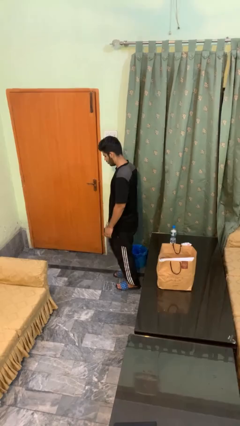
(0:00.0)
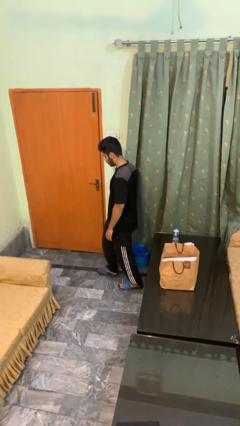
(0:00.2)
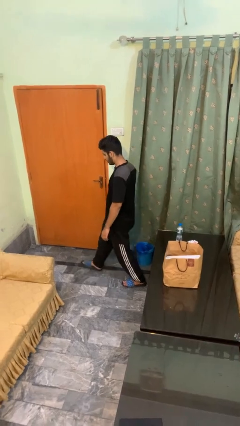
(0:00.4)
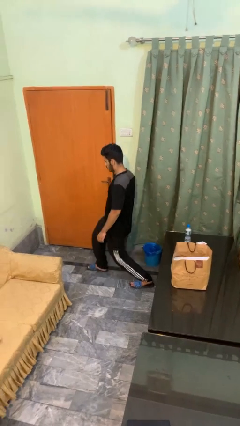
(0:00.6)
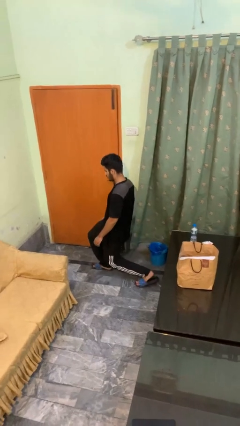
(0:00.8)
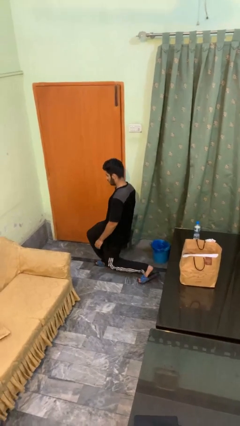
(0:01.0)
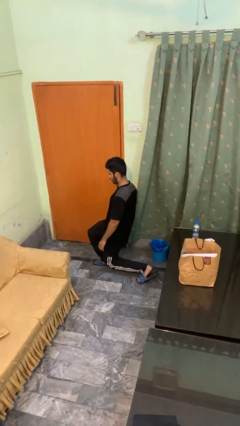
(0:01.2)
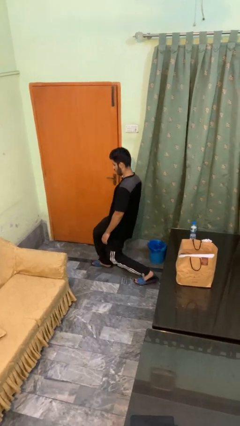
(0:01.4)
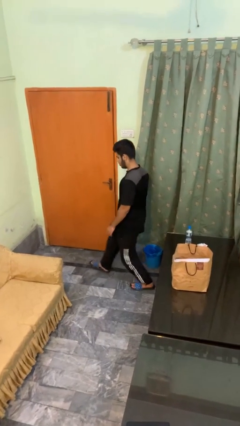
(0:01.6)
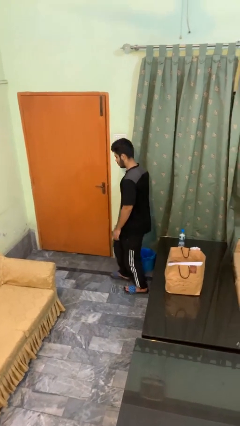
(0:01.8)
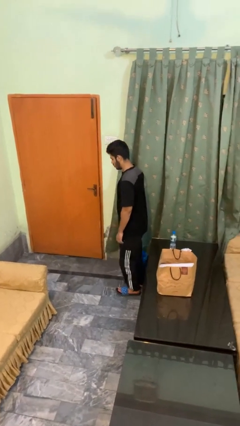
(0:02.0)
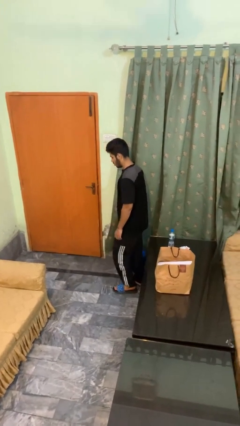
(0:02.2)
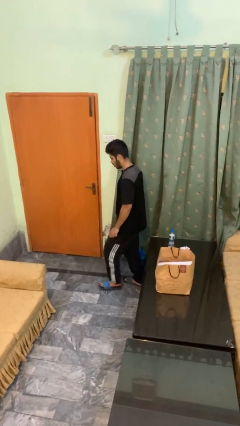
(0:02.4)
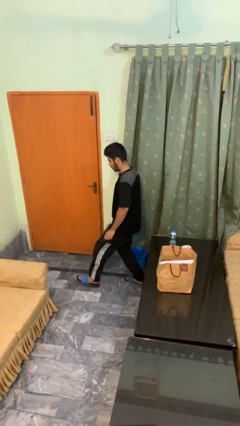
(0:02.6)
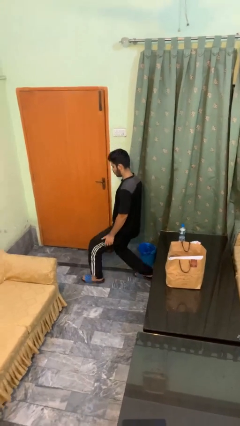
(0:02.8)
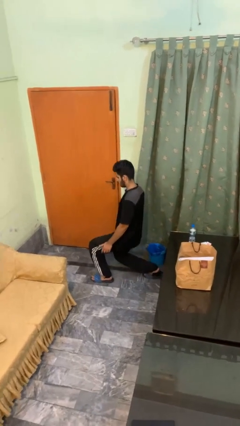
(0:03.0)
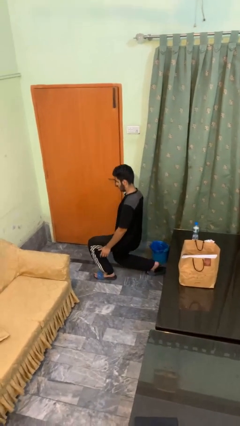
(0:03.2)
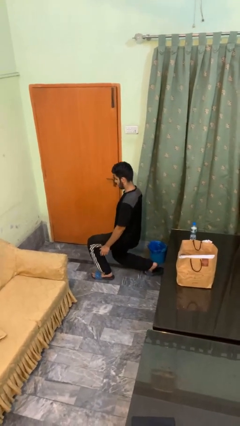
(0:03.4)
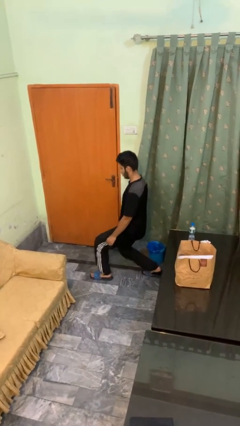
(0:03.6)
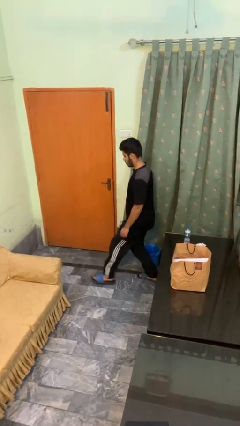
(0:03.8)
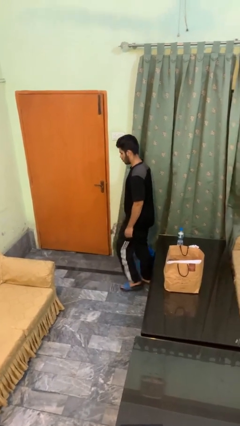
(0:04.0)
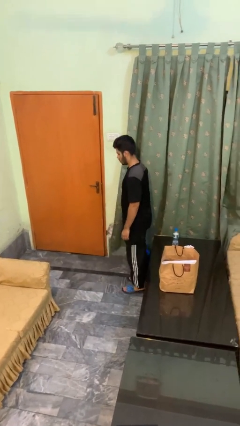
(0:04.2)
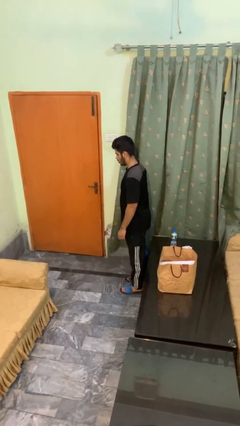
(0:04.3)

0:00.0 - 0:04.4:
person exercises with lunges

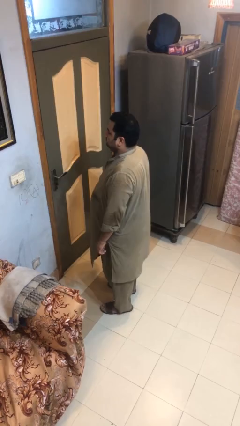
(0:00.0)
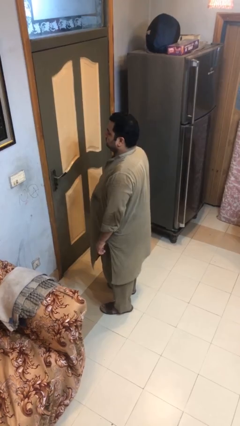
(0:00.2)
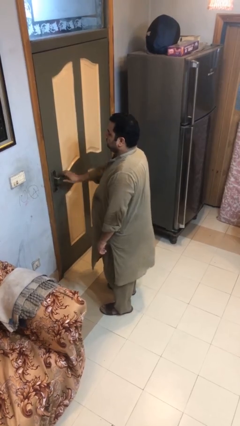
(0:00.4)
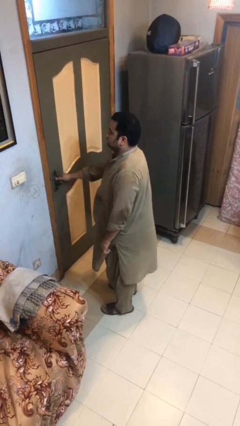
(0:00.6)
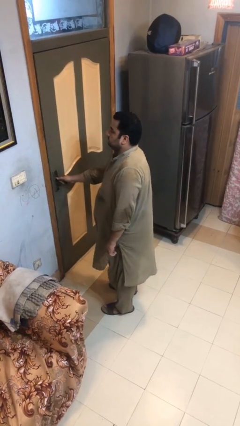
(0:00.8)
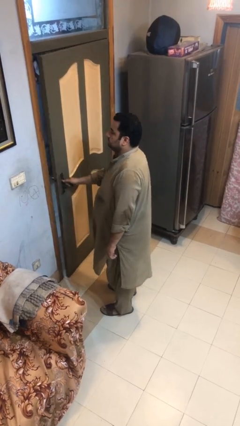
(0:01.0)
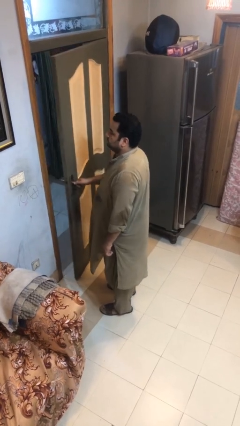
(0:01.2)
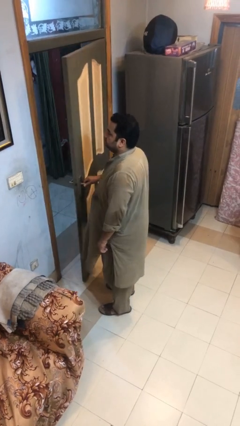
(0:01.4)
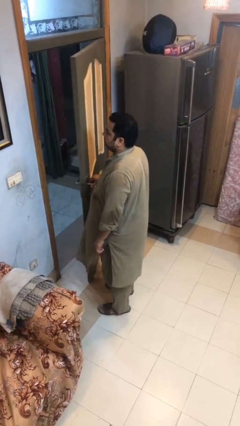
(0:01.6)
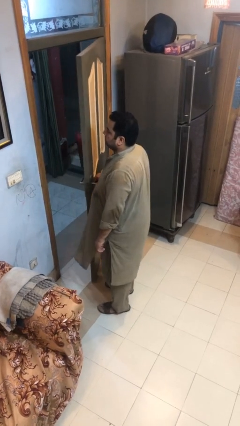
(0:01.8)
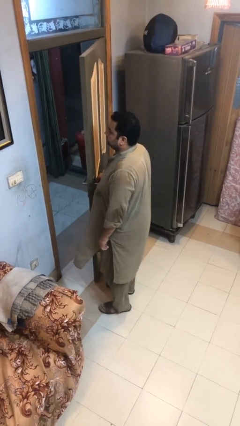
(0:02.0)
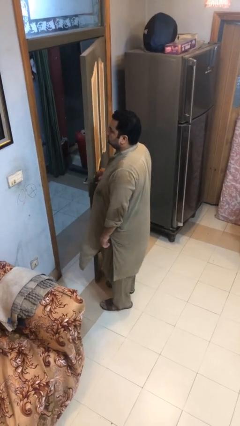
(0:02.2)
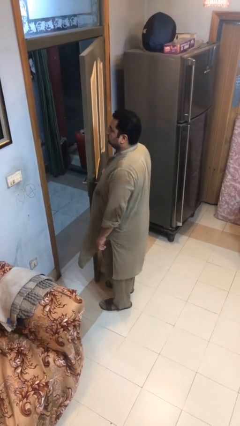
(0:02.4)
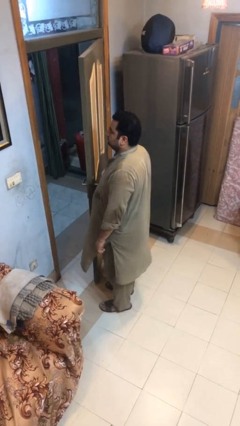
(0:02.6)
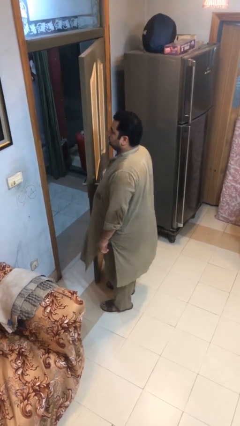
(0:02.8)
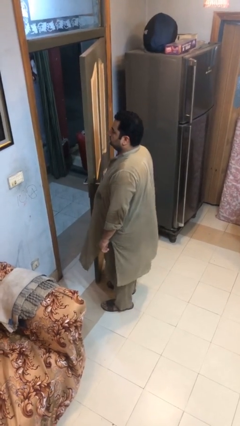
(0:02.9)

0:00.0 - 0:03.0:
person opens facility door

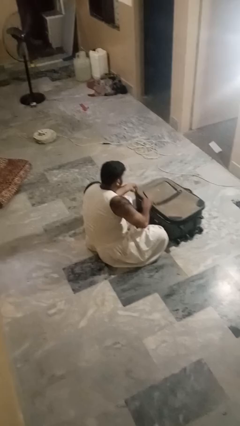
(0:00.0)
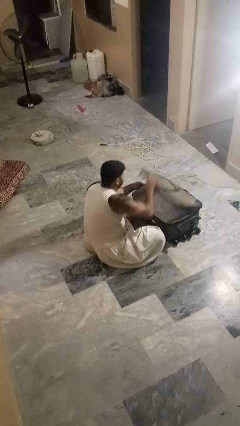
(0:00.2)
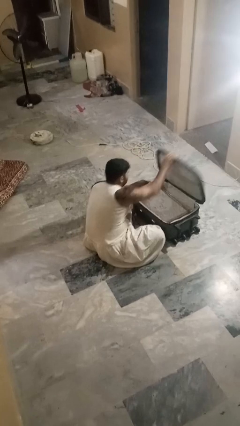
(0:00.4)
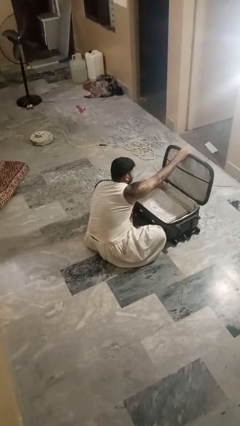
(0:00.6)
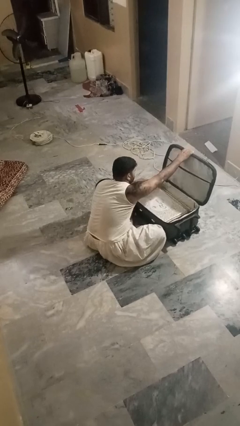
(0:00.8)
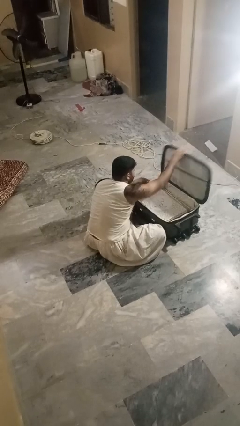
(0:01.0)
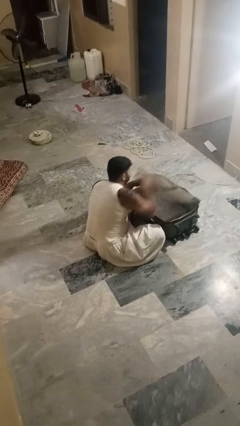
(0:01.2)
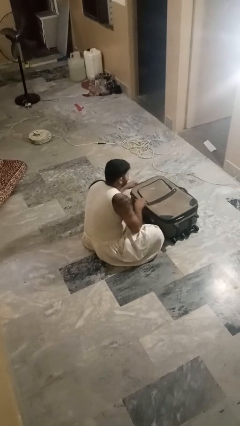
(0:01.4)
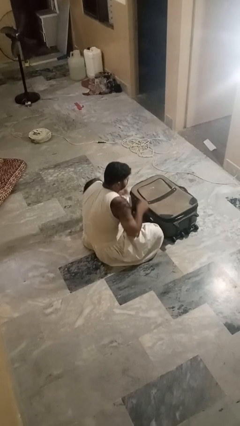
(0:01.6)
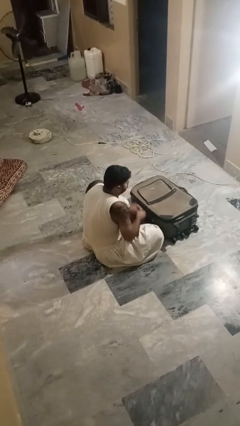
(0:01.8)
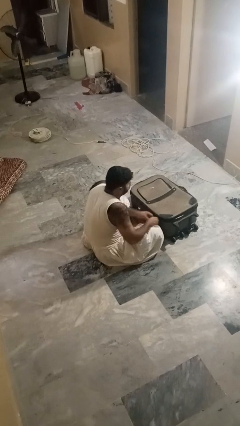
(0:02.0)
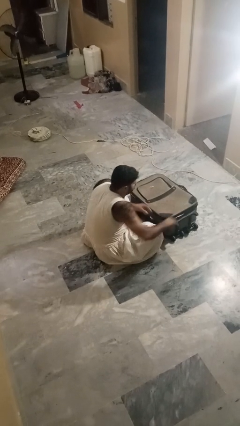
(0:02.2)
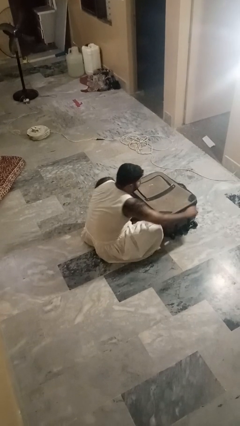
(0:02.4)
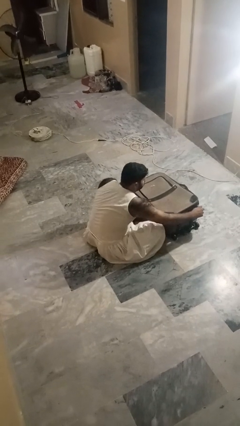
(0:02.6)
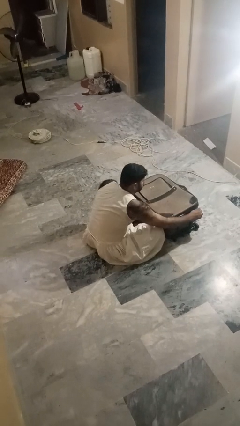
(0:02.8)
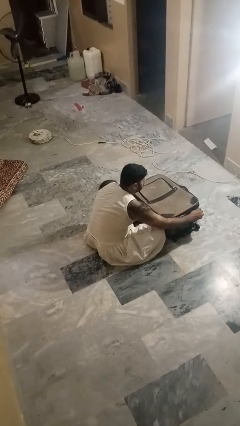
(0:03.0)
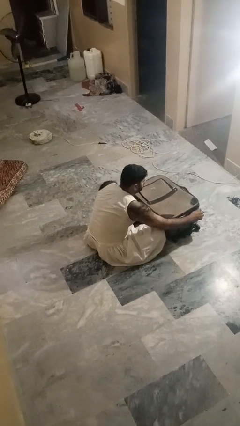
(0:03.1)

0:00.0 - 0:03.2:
person closes suitcase

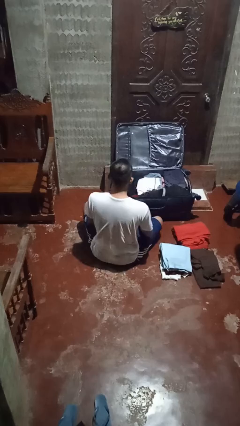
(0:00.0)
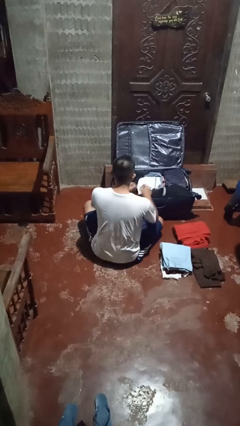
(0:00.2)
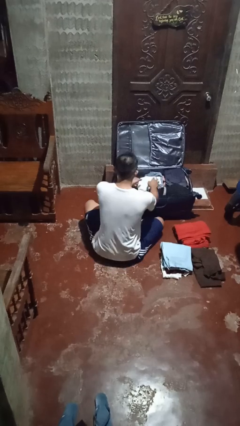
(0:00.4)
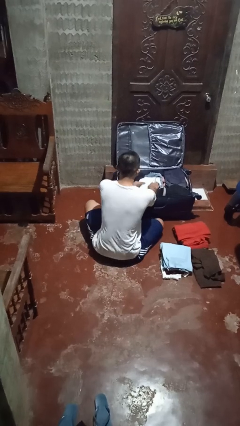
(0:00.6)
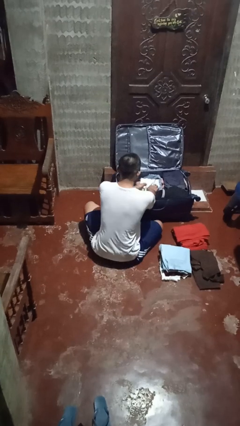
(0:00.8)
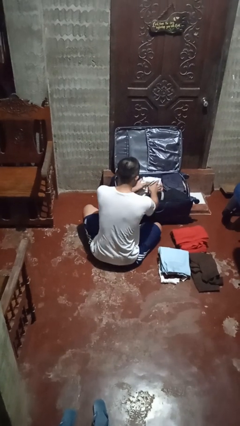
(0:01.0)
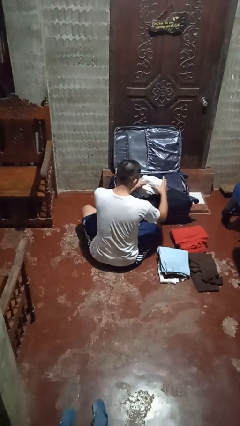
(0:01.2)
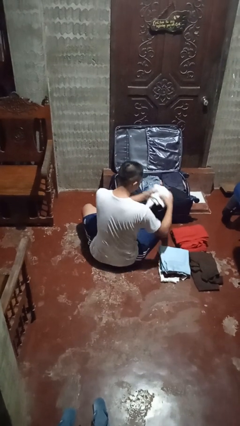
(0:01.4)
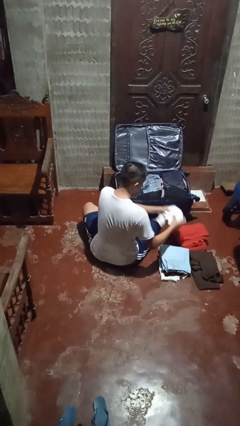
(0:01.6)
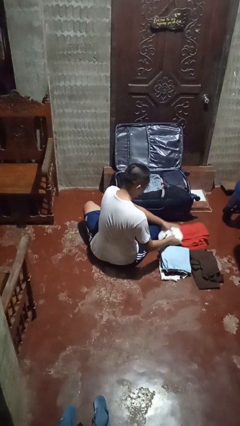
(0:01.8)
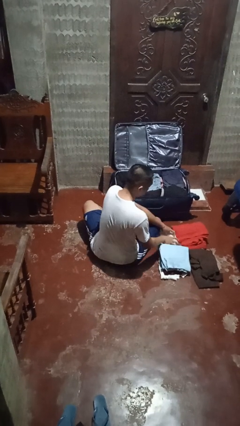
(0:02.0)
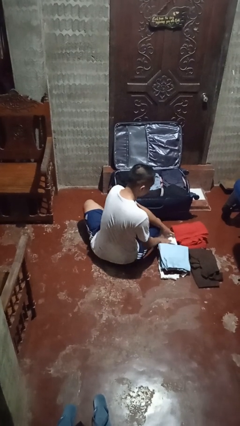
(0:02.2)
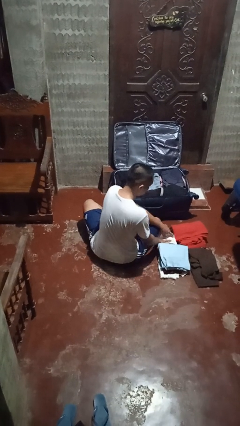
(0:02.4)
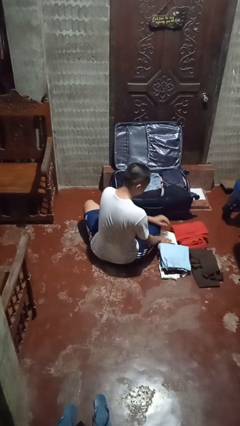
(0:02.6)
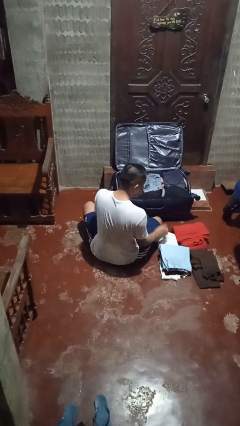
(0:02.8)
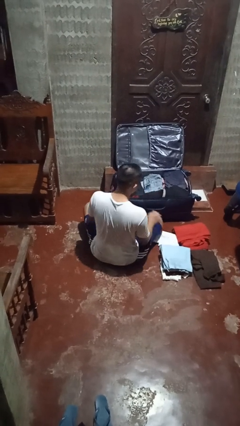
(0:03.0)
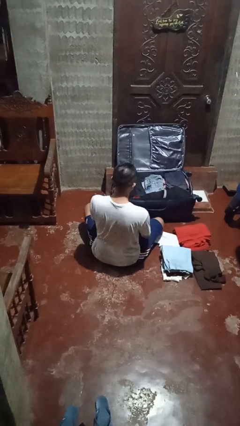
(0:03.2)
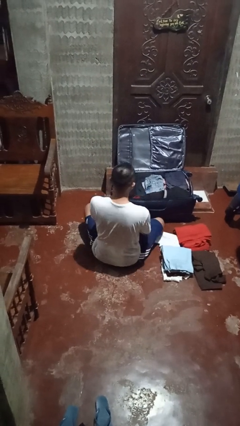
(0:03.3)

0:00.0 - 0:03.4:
person unloads clothes from suitcase

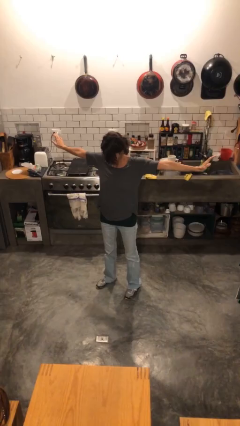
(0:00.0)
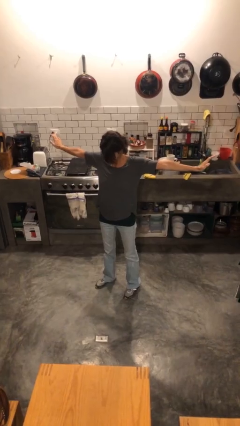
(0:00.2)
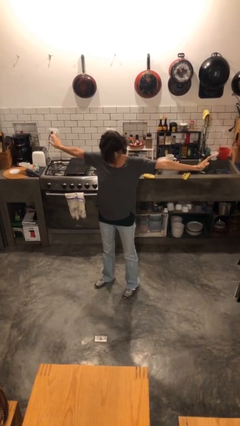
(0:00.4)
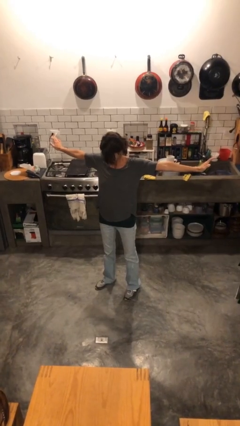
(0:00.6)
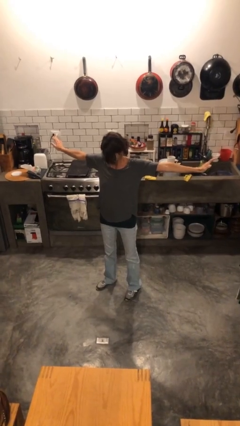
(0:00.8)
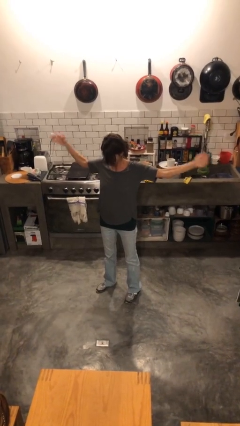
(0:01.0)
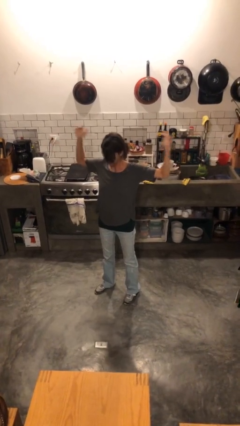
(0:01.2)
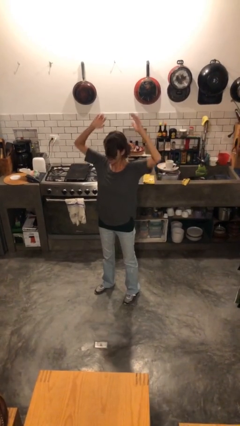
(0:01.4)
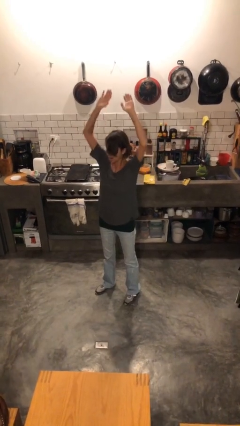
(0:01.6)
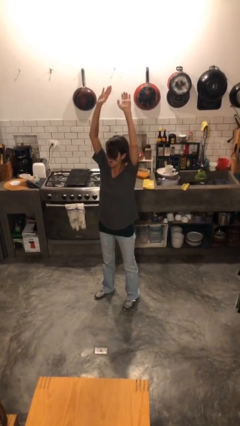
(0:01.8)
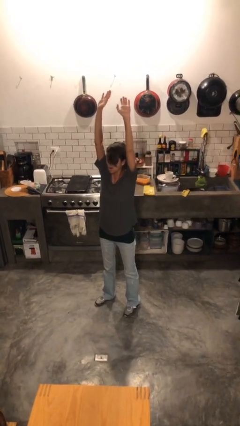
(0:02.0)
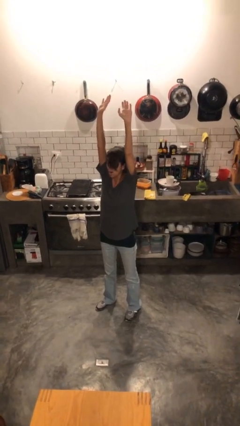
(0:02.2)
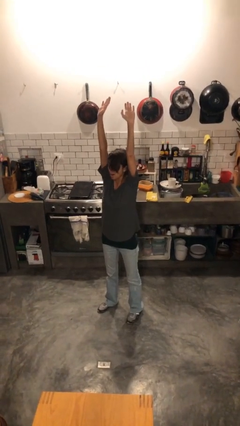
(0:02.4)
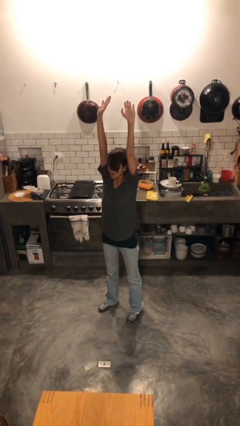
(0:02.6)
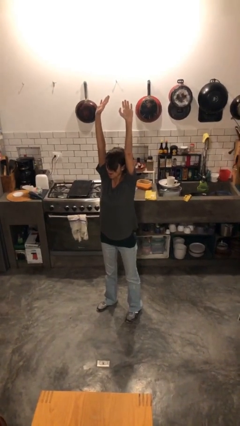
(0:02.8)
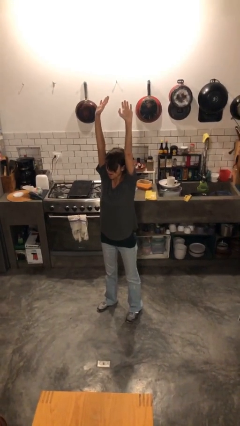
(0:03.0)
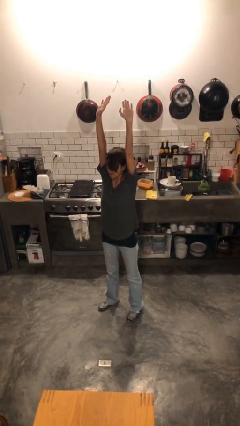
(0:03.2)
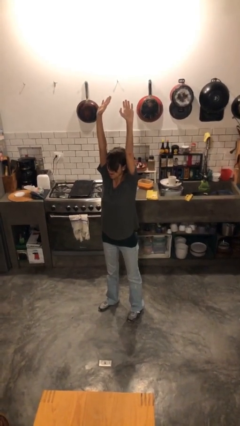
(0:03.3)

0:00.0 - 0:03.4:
person stretches arms over head

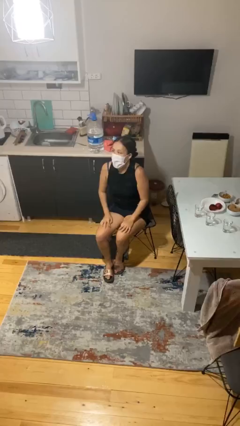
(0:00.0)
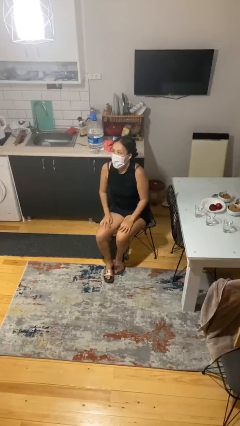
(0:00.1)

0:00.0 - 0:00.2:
person takes off facemask
